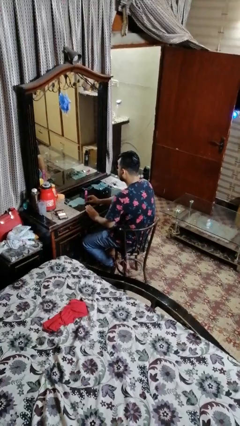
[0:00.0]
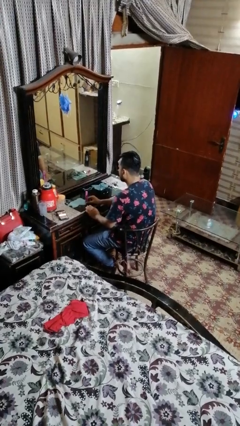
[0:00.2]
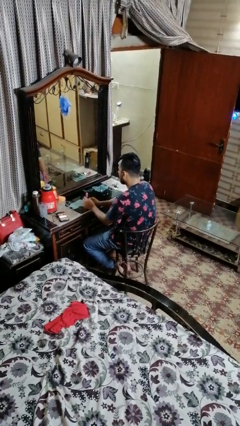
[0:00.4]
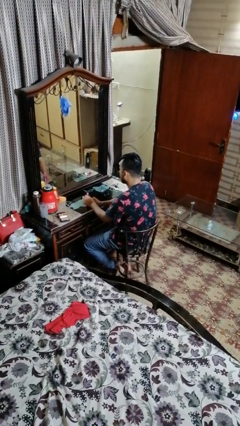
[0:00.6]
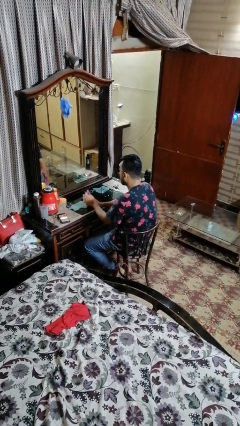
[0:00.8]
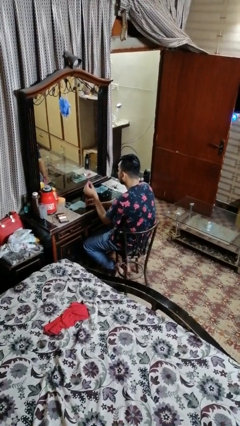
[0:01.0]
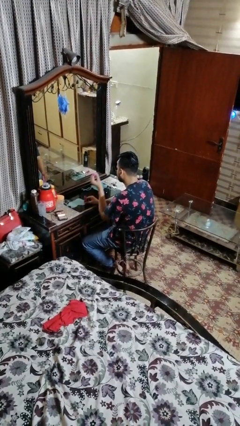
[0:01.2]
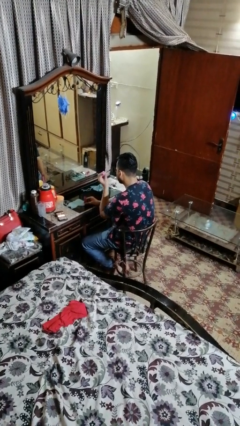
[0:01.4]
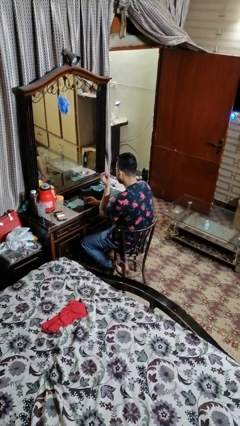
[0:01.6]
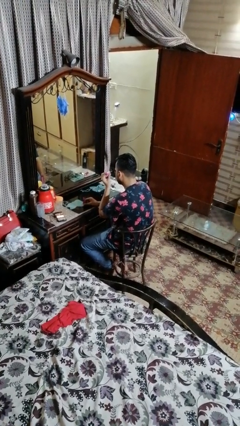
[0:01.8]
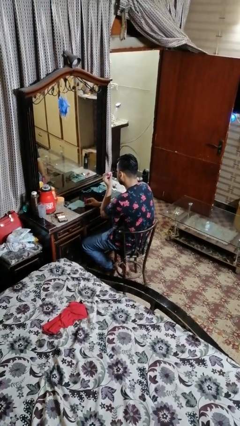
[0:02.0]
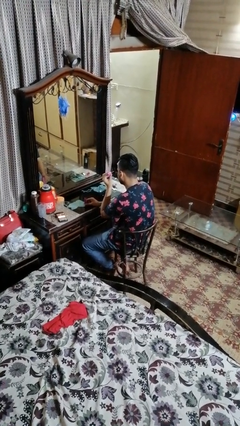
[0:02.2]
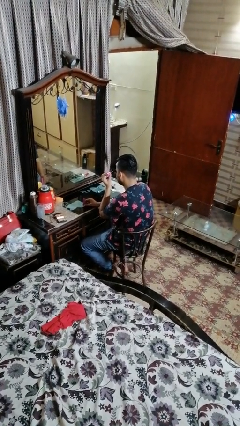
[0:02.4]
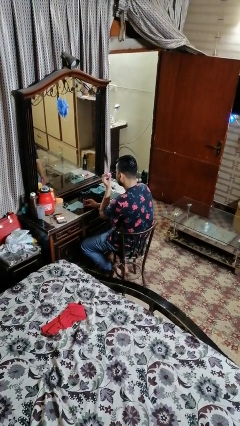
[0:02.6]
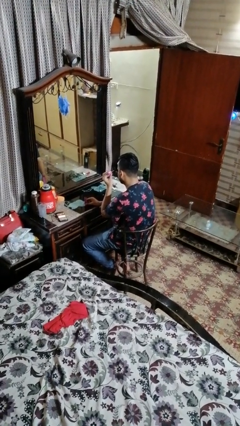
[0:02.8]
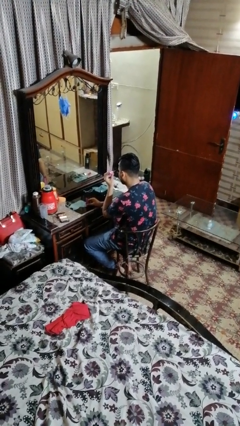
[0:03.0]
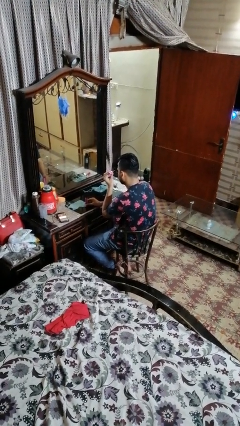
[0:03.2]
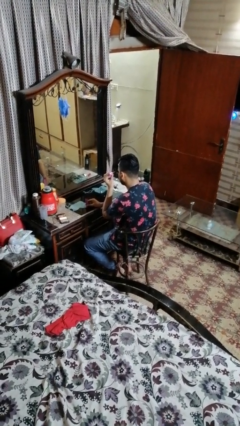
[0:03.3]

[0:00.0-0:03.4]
person applies eye makeup

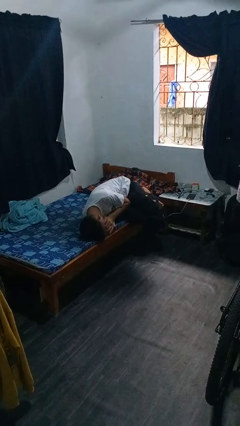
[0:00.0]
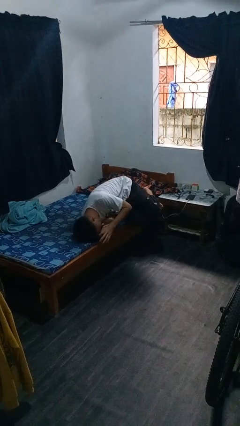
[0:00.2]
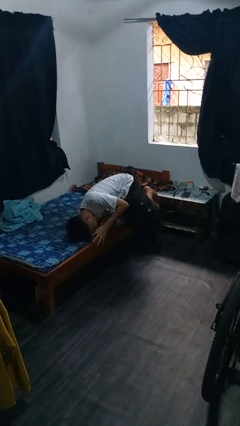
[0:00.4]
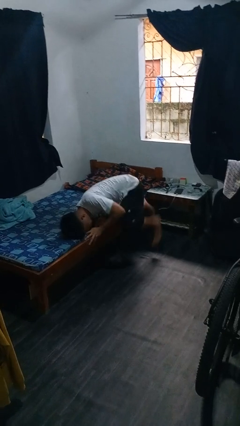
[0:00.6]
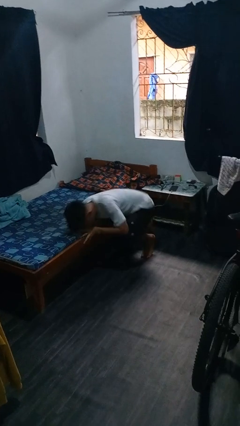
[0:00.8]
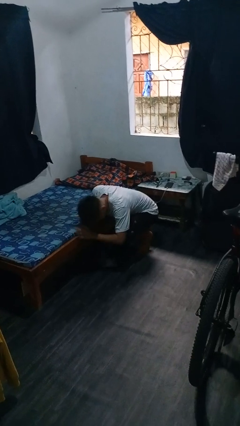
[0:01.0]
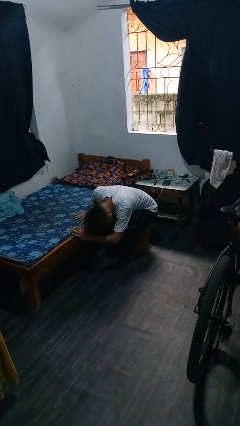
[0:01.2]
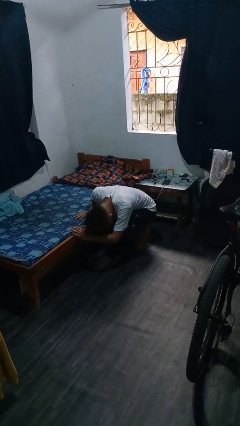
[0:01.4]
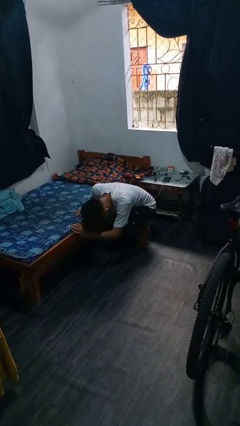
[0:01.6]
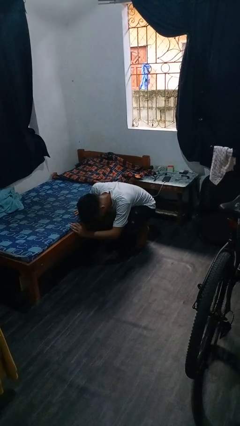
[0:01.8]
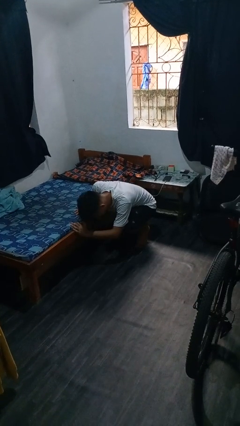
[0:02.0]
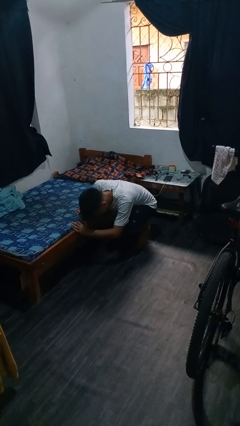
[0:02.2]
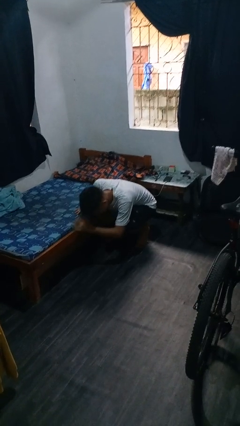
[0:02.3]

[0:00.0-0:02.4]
person falls from bed

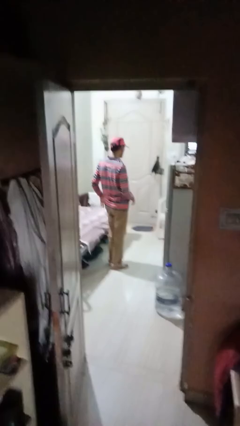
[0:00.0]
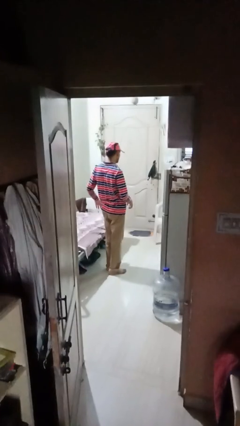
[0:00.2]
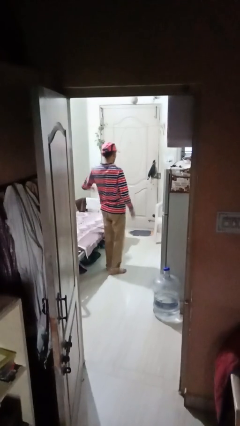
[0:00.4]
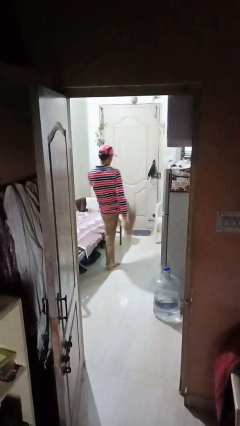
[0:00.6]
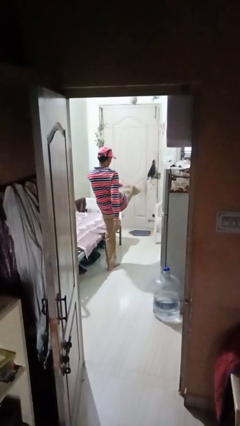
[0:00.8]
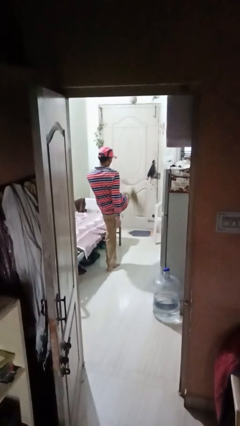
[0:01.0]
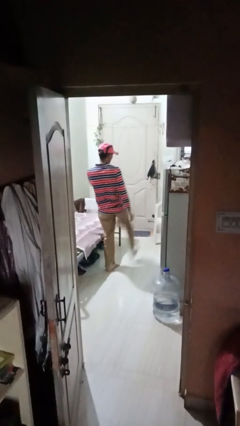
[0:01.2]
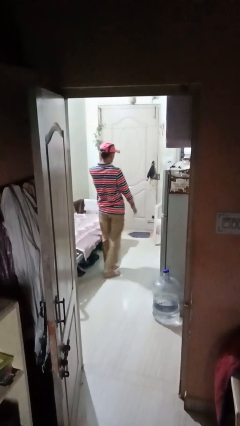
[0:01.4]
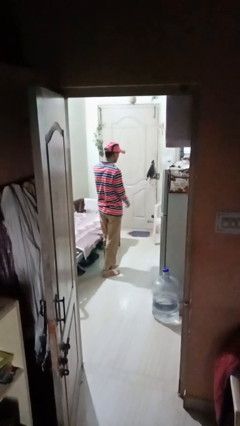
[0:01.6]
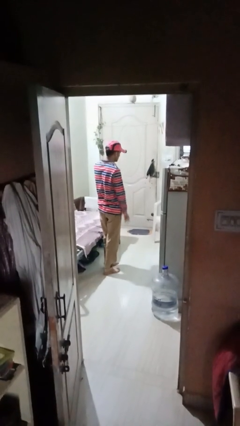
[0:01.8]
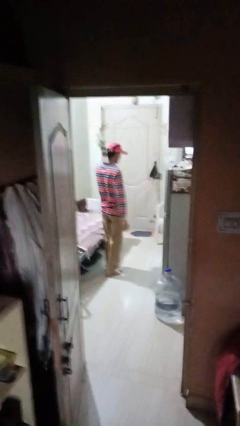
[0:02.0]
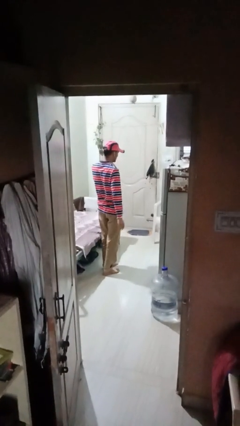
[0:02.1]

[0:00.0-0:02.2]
person karate kicks

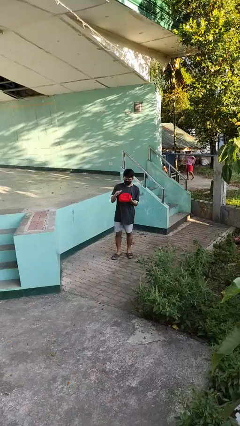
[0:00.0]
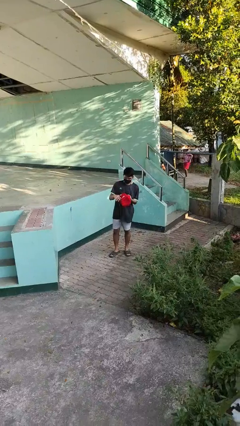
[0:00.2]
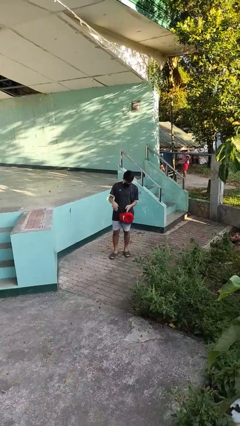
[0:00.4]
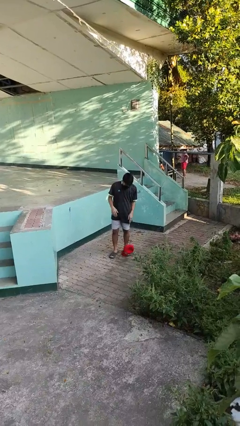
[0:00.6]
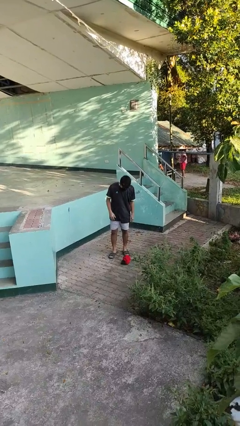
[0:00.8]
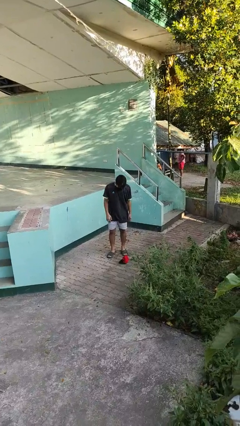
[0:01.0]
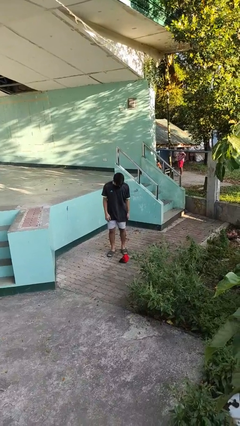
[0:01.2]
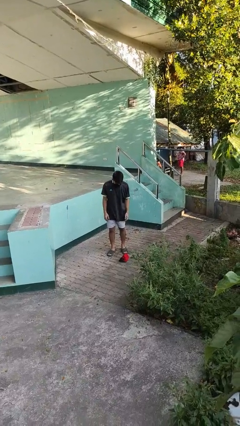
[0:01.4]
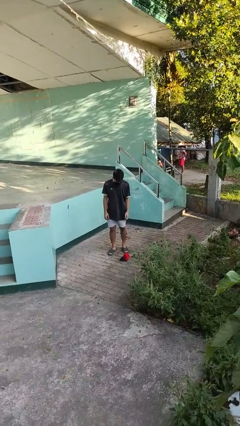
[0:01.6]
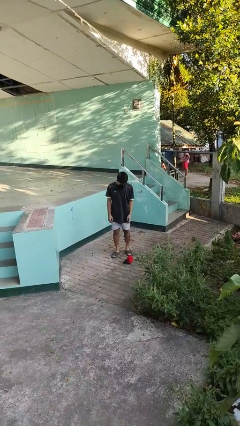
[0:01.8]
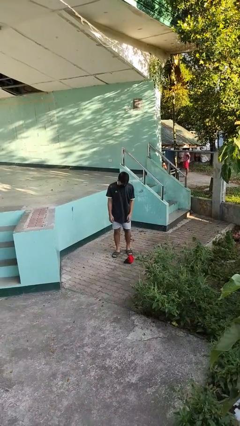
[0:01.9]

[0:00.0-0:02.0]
person drops object

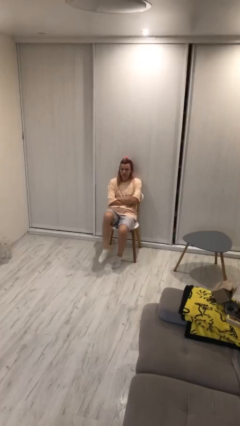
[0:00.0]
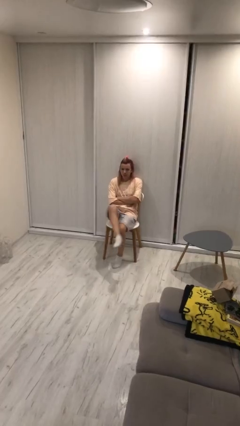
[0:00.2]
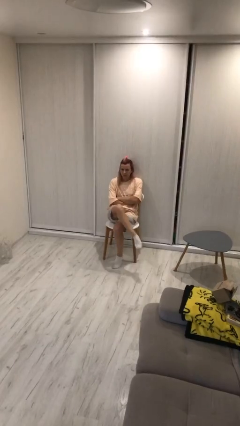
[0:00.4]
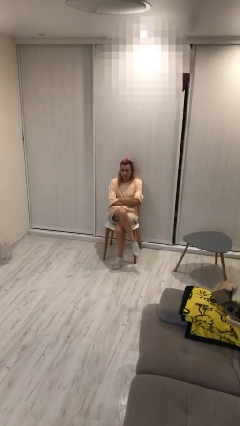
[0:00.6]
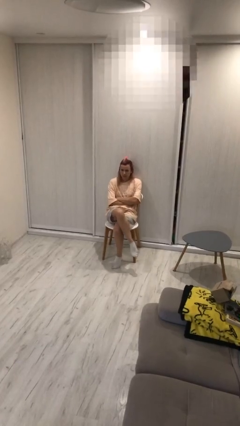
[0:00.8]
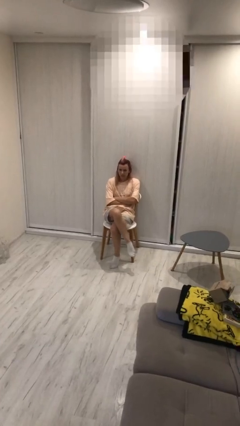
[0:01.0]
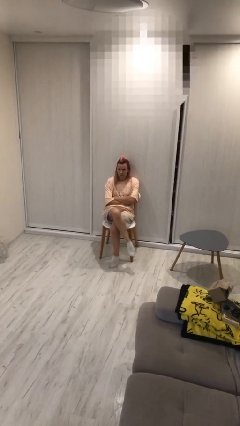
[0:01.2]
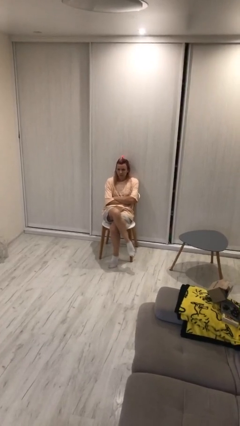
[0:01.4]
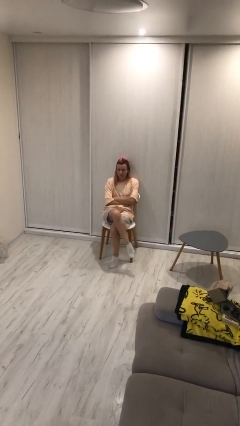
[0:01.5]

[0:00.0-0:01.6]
person crosses legs

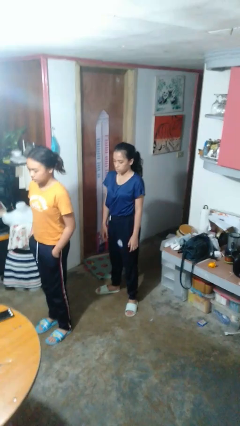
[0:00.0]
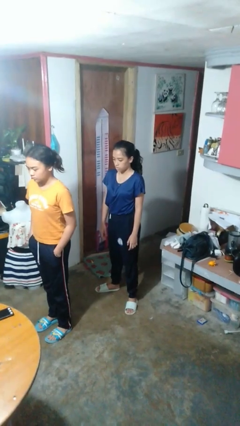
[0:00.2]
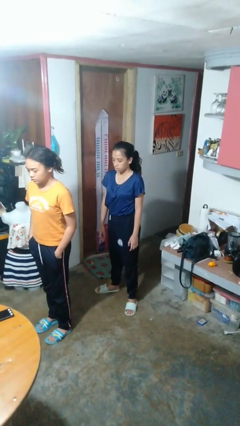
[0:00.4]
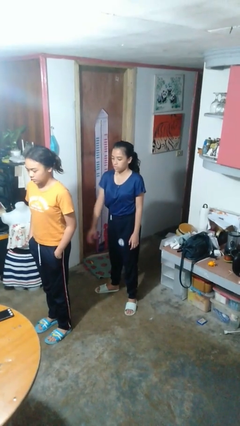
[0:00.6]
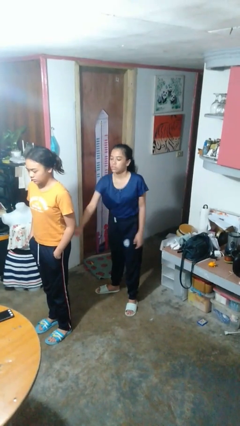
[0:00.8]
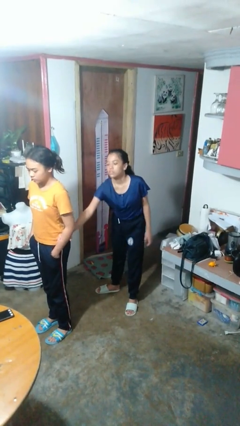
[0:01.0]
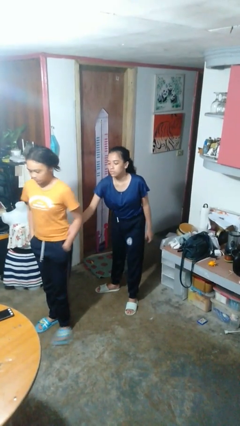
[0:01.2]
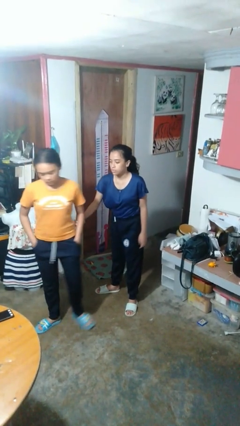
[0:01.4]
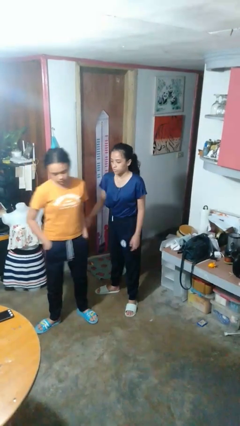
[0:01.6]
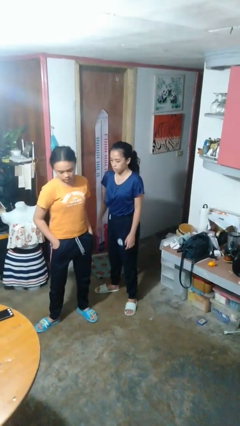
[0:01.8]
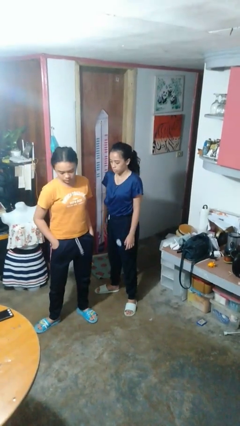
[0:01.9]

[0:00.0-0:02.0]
person grabs person by forearm

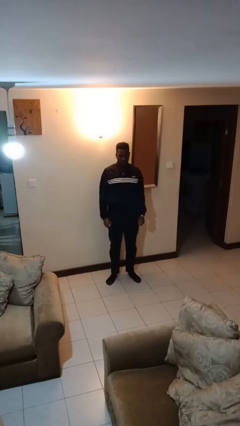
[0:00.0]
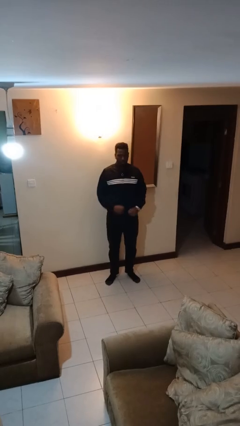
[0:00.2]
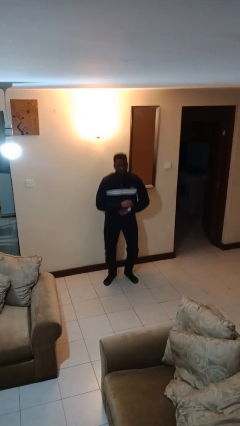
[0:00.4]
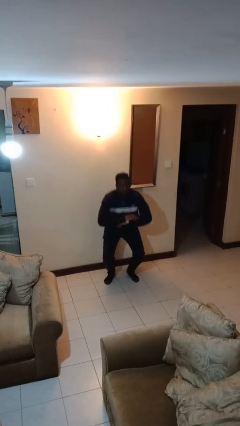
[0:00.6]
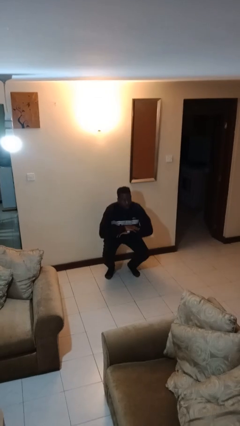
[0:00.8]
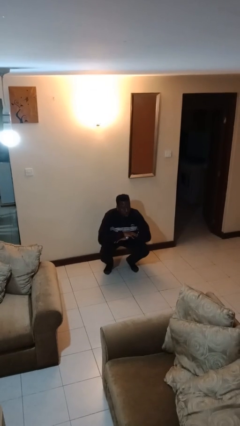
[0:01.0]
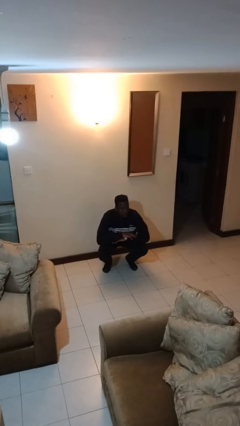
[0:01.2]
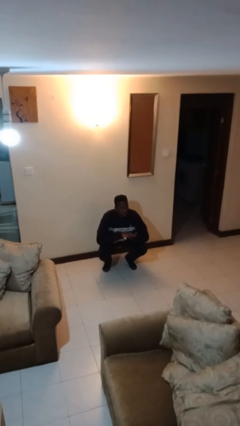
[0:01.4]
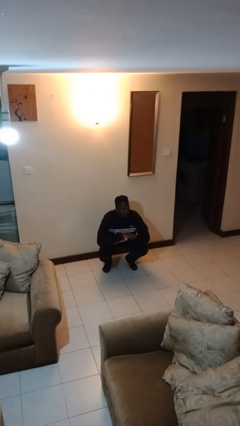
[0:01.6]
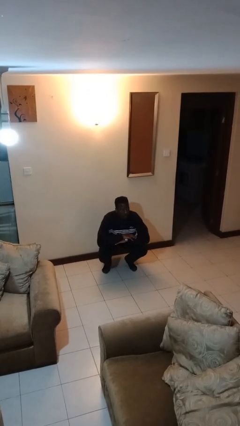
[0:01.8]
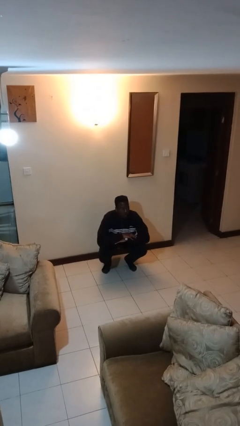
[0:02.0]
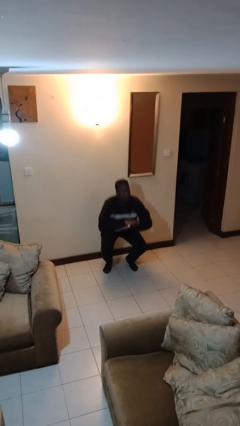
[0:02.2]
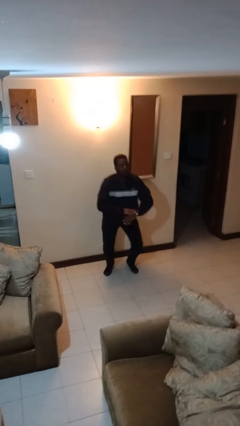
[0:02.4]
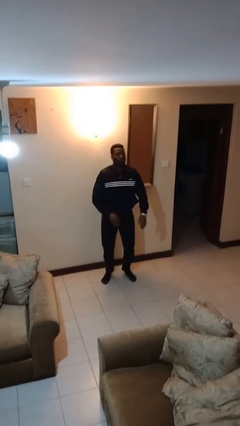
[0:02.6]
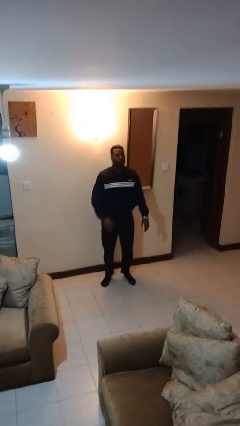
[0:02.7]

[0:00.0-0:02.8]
person squats

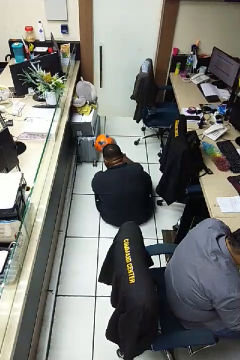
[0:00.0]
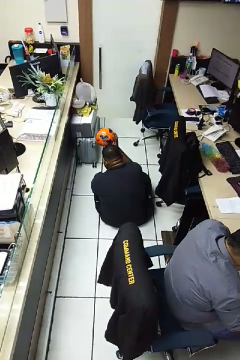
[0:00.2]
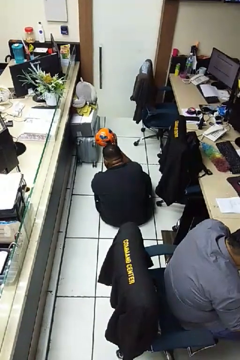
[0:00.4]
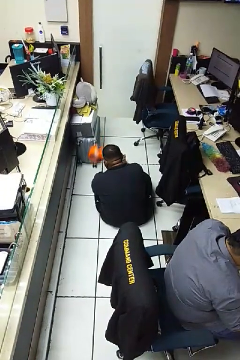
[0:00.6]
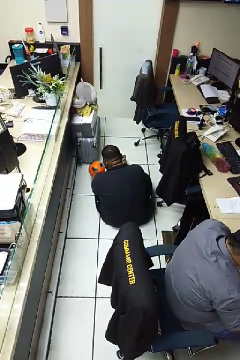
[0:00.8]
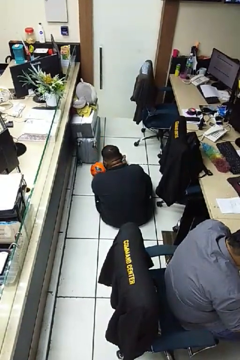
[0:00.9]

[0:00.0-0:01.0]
person bounces ball on floor
